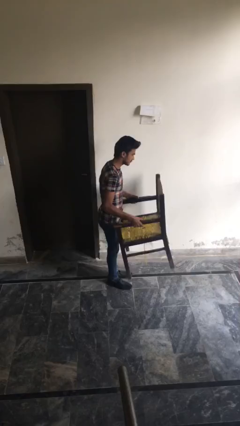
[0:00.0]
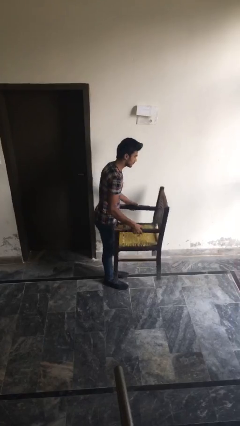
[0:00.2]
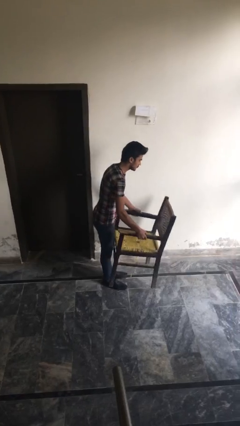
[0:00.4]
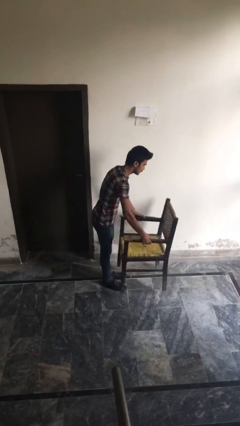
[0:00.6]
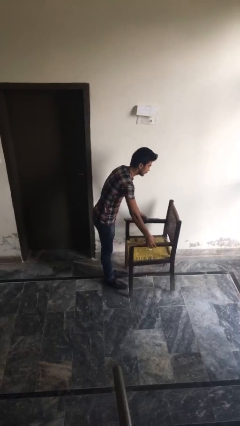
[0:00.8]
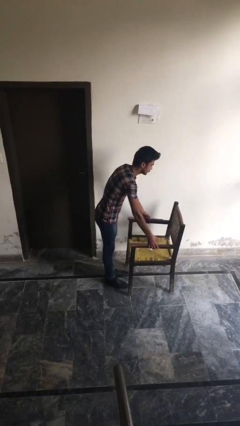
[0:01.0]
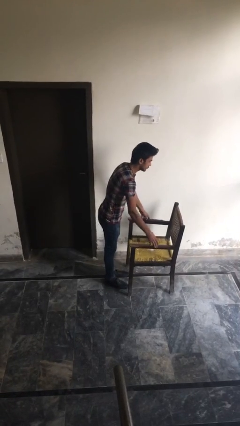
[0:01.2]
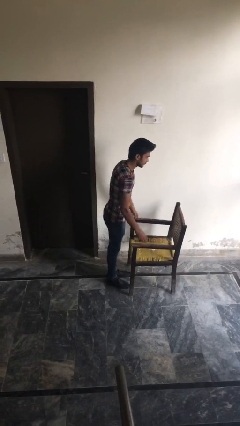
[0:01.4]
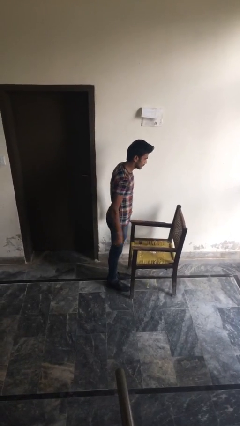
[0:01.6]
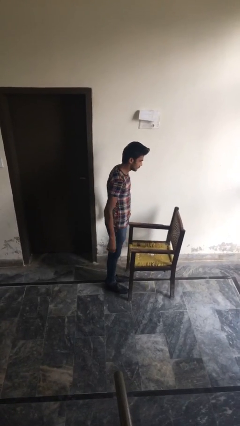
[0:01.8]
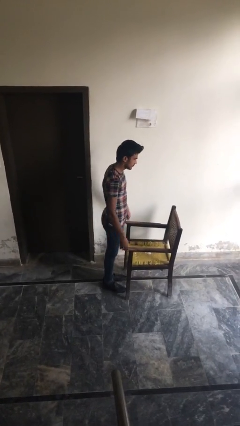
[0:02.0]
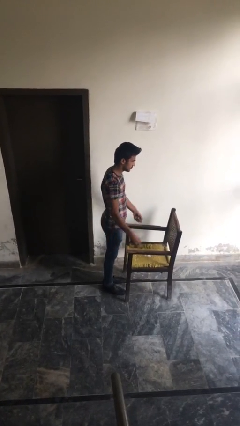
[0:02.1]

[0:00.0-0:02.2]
person puts down object on floor

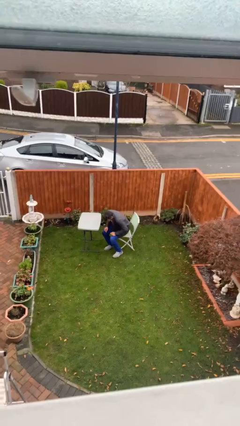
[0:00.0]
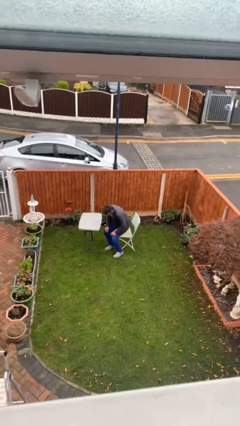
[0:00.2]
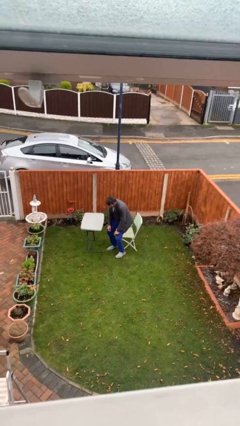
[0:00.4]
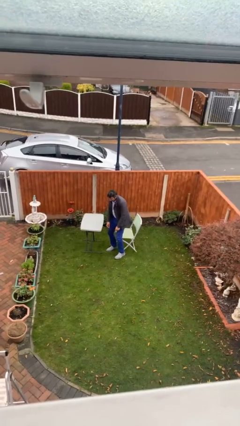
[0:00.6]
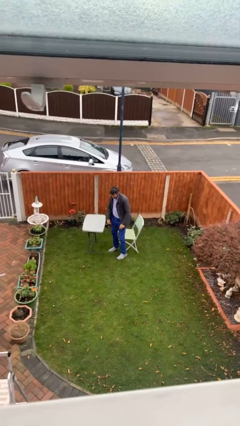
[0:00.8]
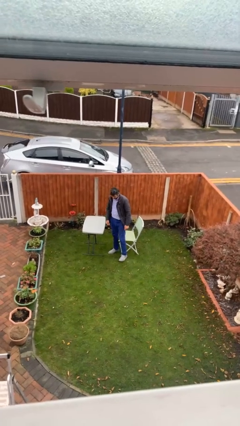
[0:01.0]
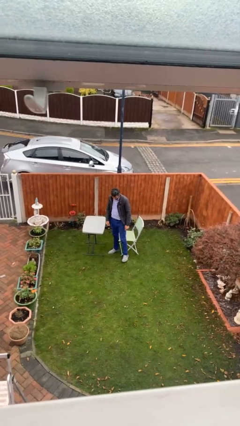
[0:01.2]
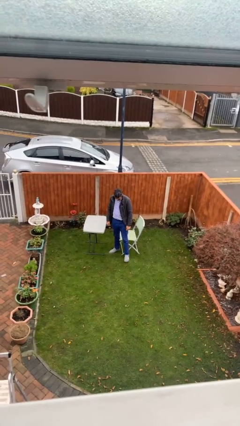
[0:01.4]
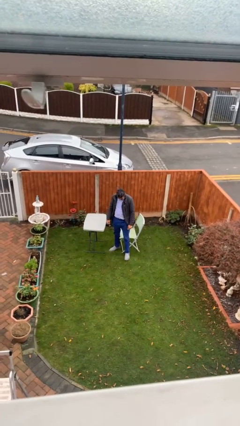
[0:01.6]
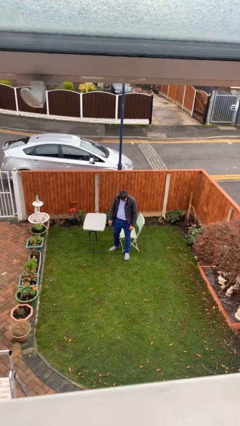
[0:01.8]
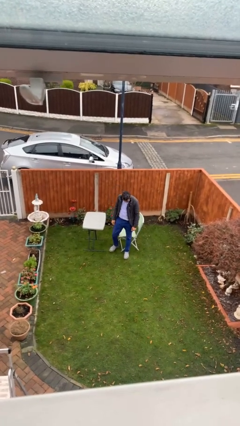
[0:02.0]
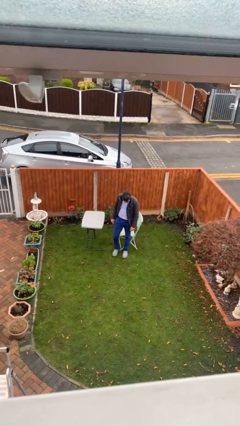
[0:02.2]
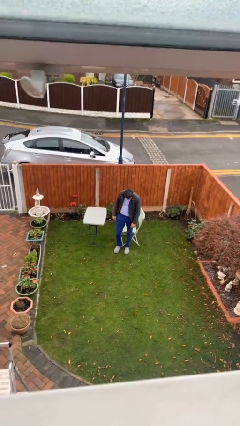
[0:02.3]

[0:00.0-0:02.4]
person stands up

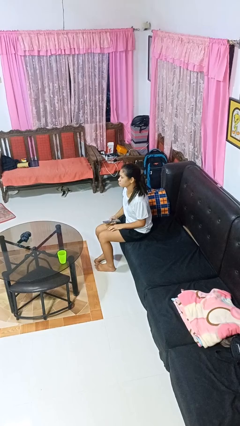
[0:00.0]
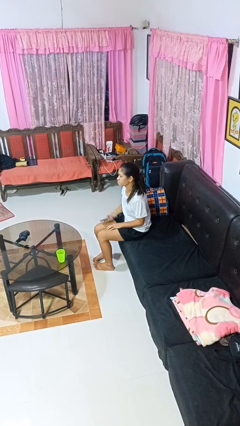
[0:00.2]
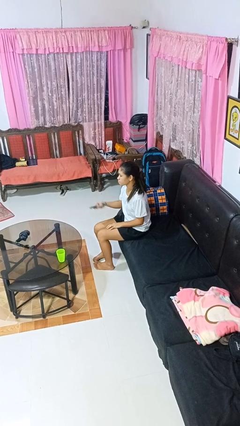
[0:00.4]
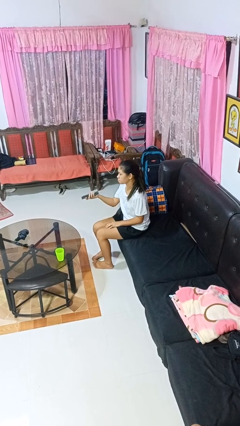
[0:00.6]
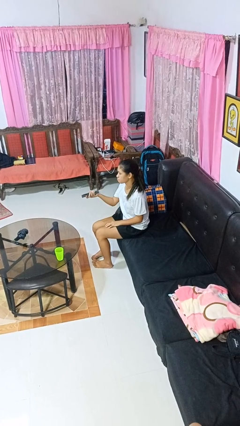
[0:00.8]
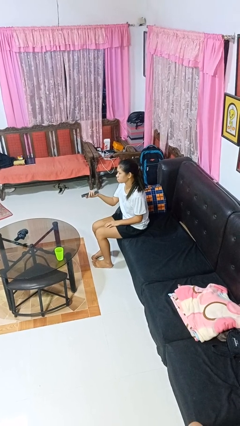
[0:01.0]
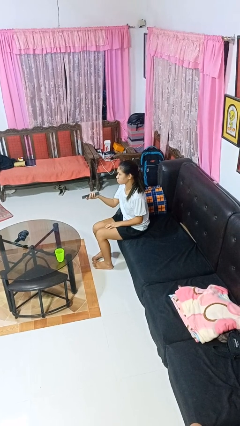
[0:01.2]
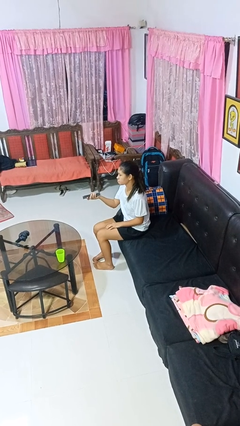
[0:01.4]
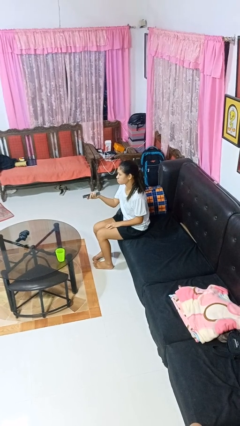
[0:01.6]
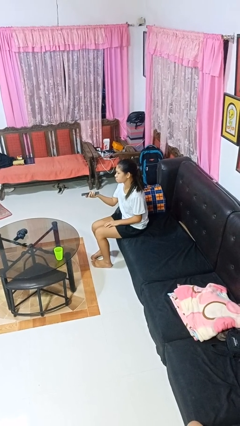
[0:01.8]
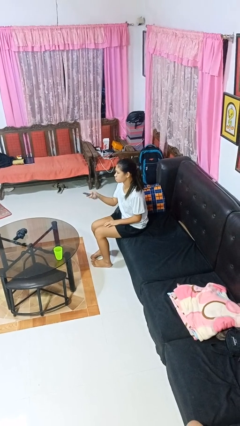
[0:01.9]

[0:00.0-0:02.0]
person uses television remote

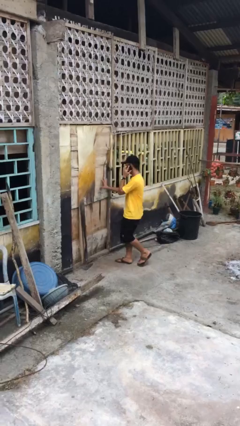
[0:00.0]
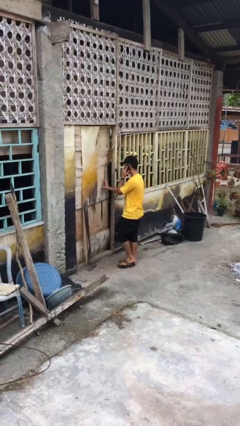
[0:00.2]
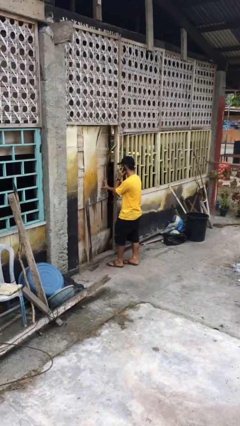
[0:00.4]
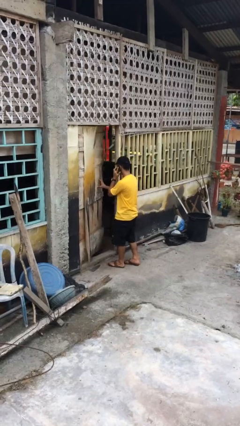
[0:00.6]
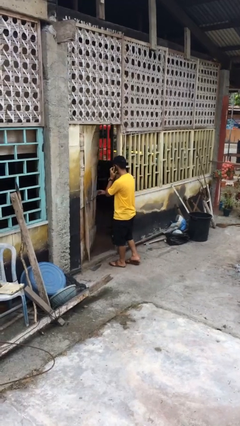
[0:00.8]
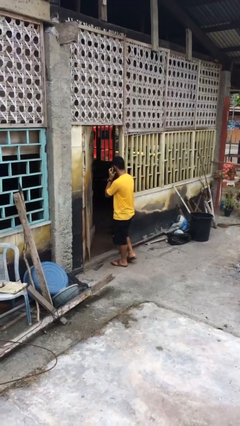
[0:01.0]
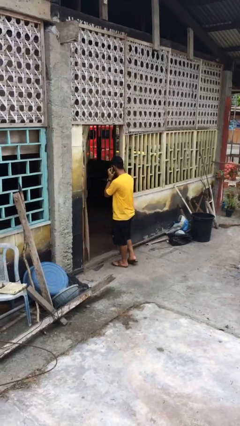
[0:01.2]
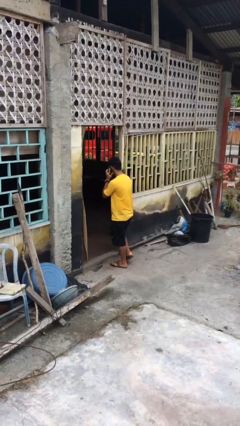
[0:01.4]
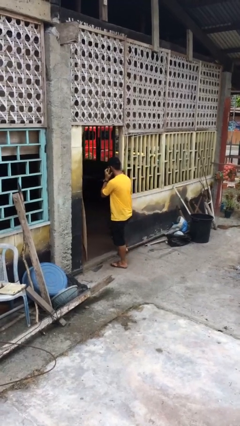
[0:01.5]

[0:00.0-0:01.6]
person opens facility door

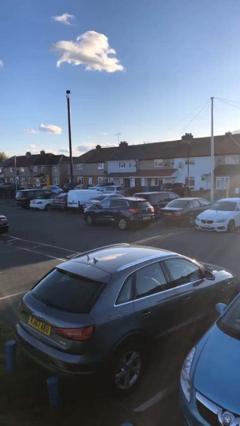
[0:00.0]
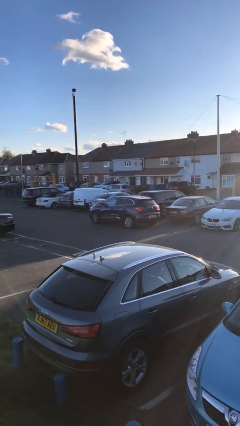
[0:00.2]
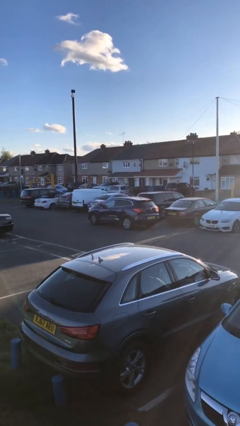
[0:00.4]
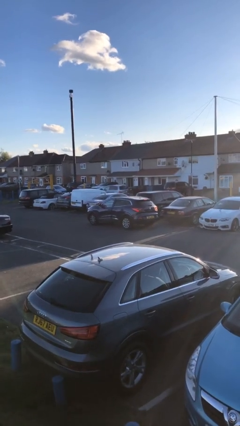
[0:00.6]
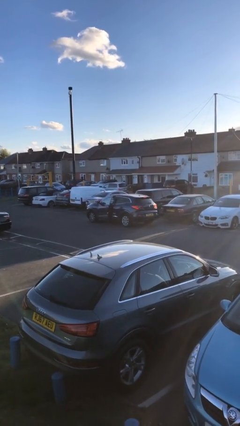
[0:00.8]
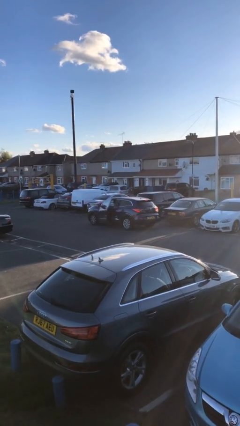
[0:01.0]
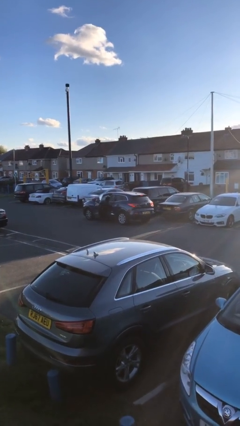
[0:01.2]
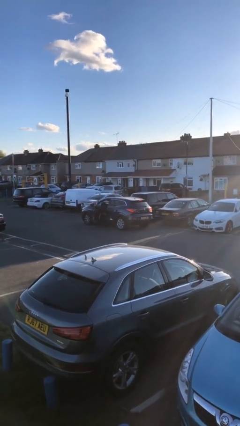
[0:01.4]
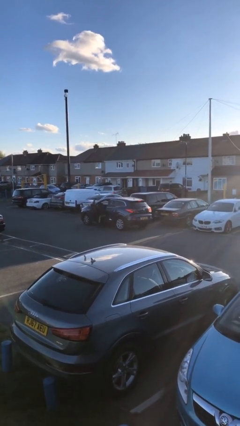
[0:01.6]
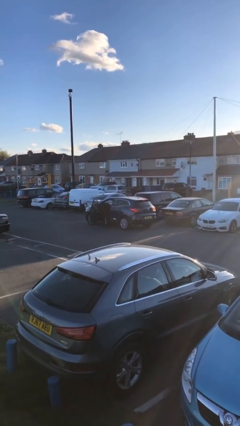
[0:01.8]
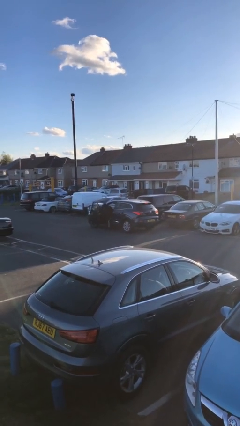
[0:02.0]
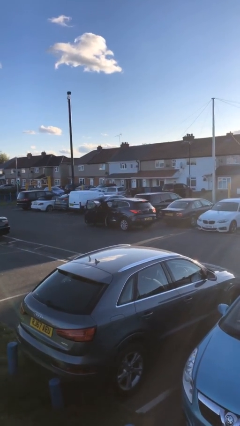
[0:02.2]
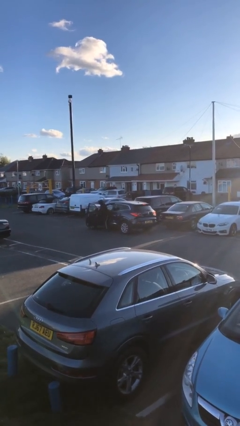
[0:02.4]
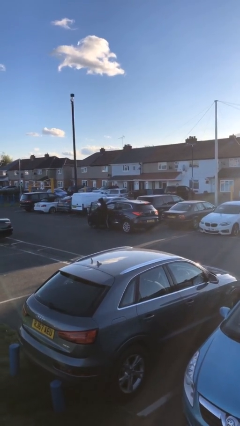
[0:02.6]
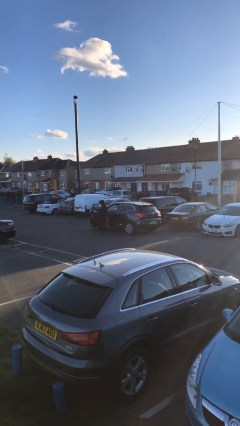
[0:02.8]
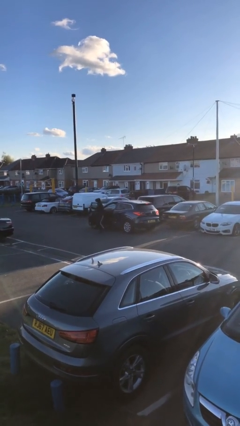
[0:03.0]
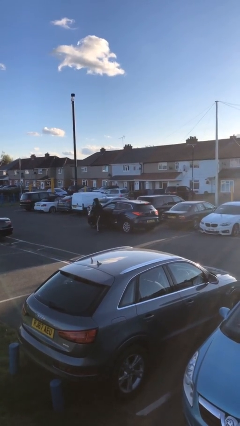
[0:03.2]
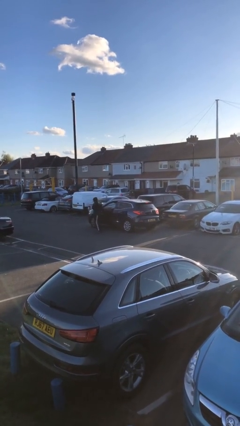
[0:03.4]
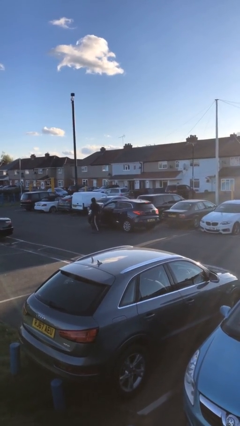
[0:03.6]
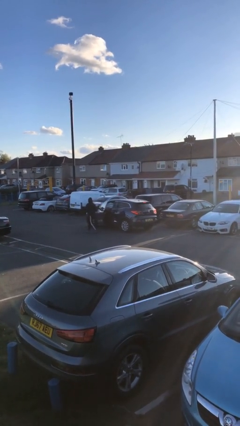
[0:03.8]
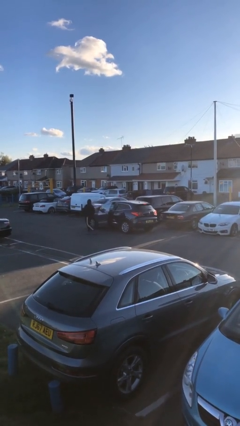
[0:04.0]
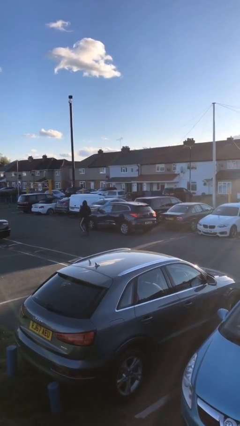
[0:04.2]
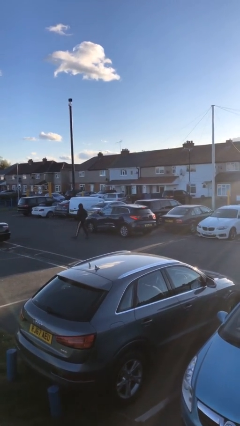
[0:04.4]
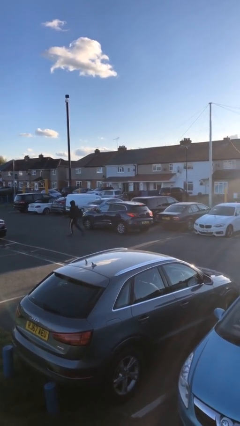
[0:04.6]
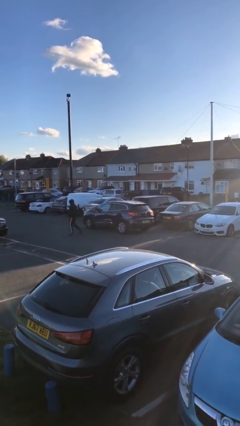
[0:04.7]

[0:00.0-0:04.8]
car drops off person

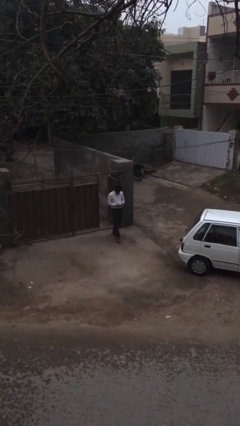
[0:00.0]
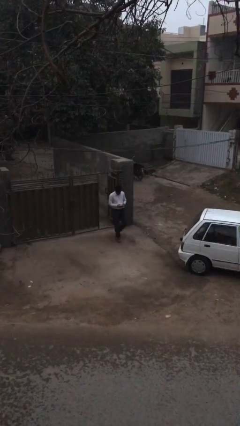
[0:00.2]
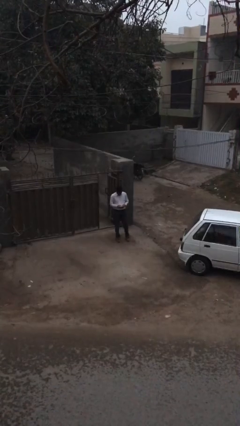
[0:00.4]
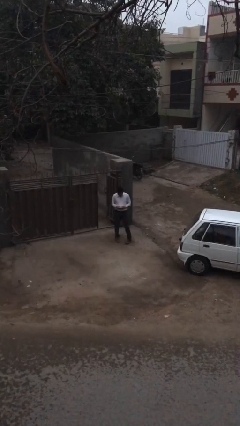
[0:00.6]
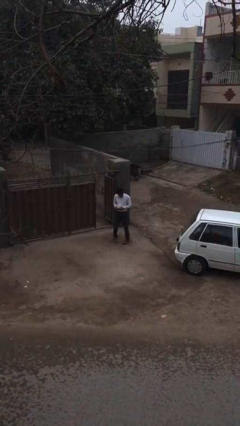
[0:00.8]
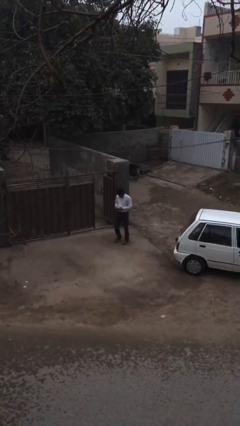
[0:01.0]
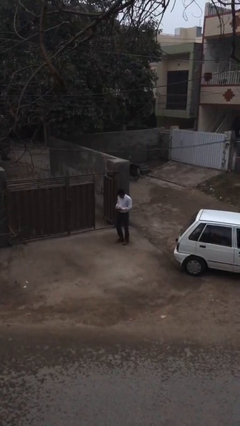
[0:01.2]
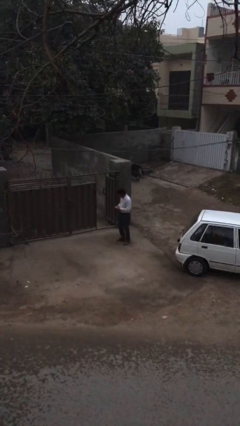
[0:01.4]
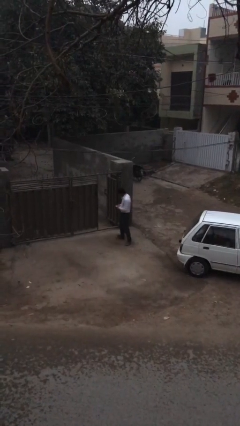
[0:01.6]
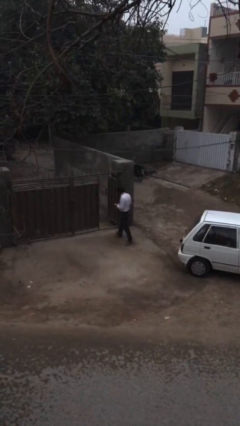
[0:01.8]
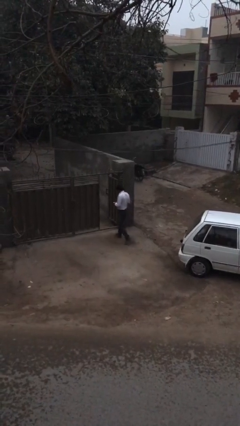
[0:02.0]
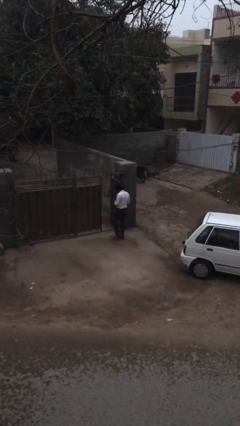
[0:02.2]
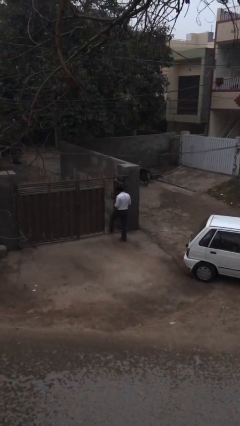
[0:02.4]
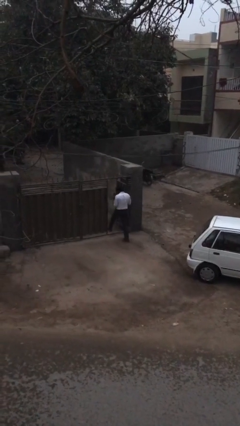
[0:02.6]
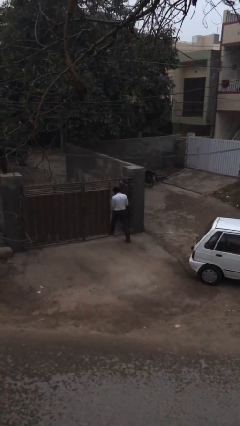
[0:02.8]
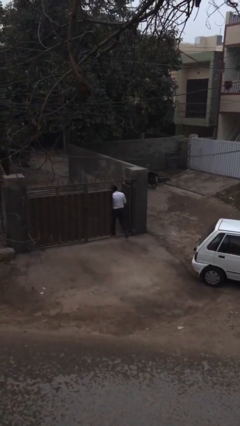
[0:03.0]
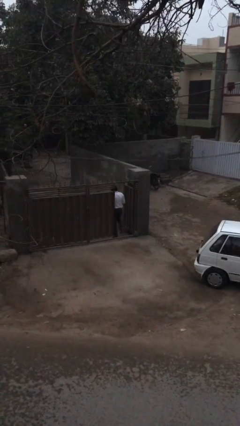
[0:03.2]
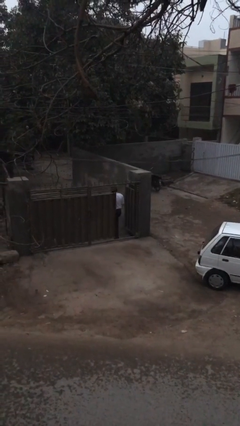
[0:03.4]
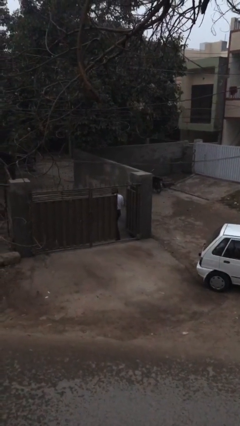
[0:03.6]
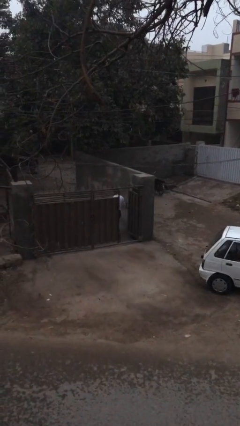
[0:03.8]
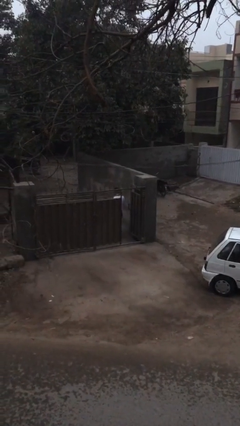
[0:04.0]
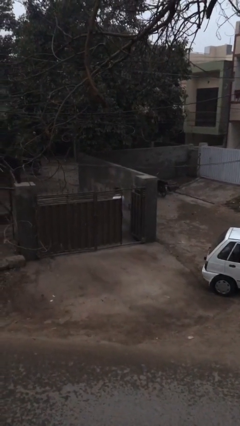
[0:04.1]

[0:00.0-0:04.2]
person exits scene through structure
